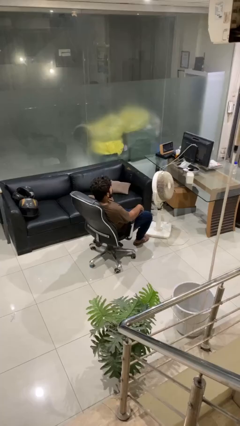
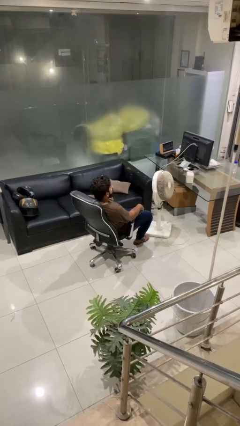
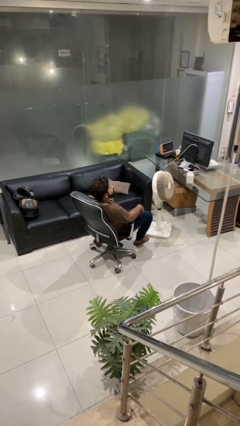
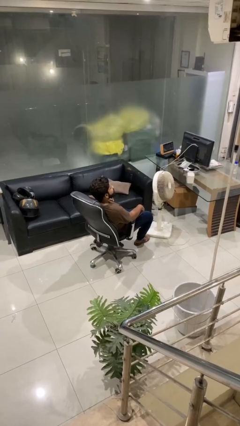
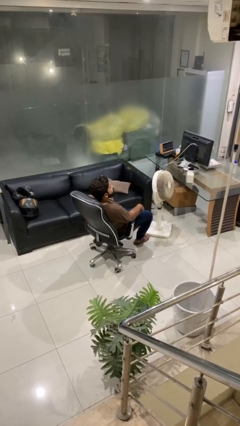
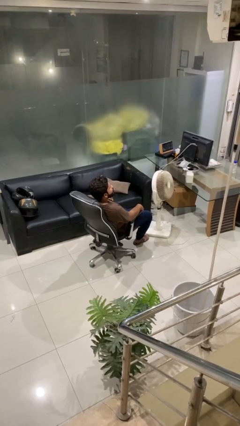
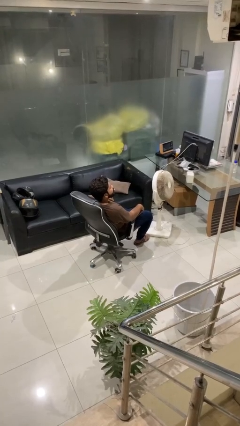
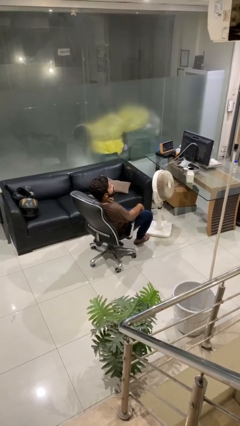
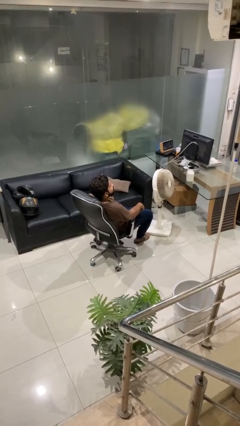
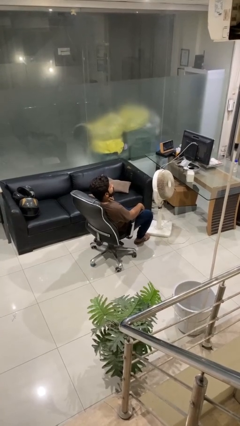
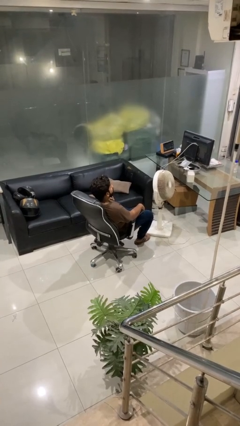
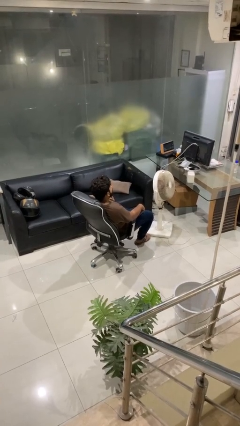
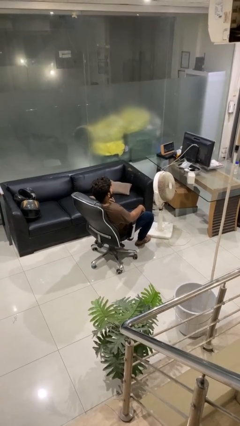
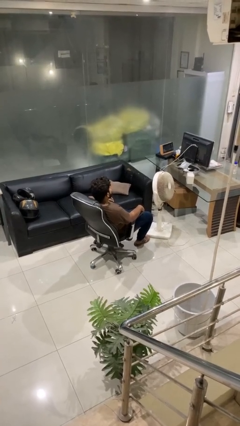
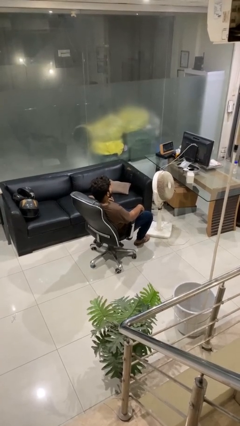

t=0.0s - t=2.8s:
person sticks out tongue

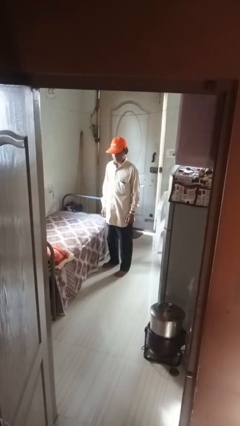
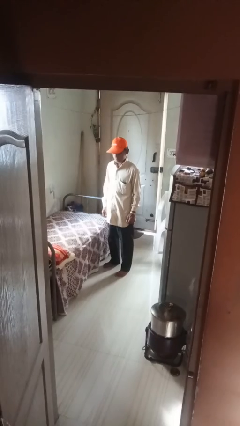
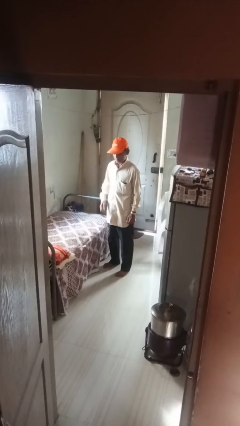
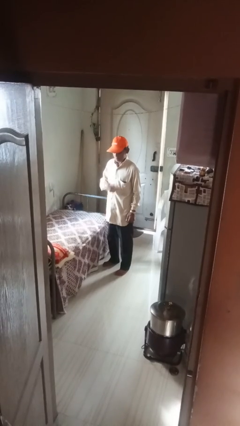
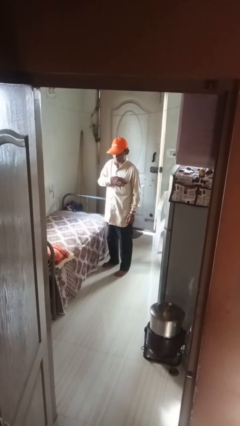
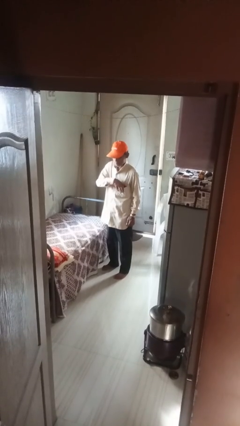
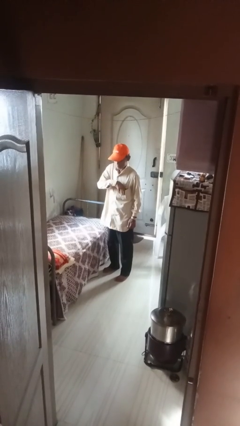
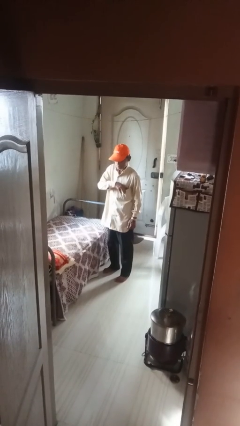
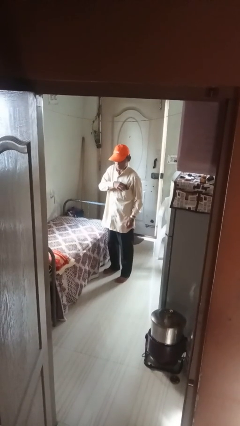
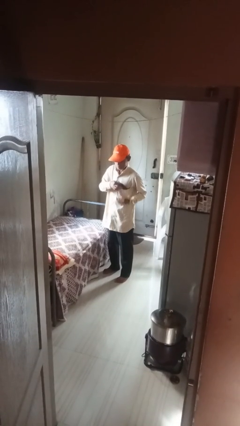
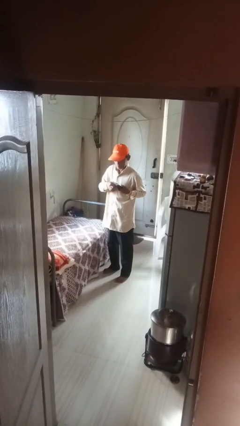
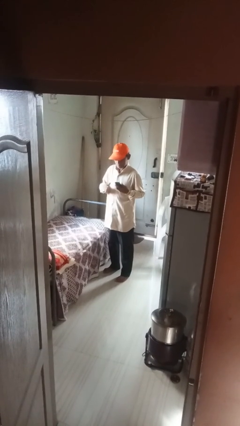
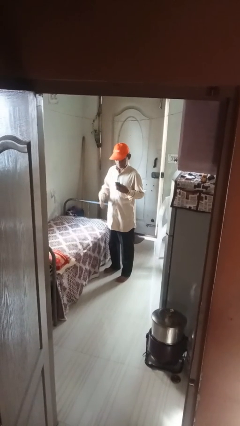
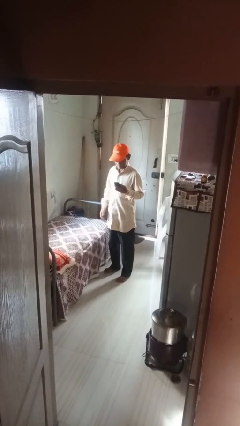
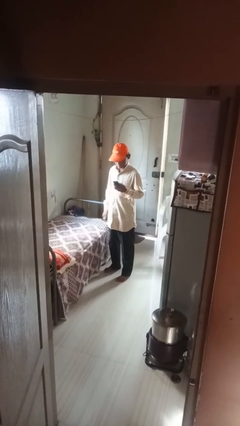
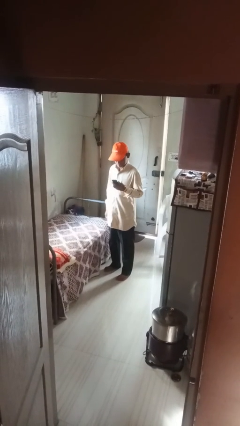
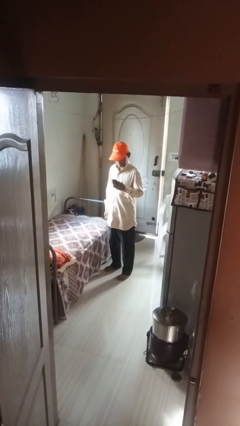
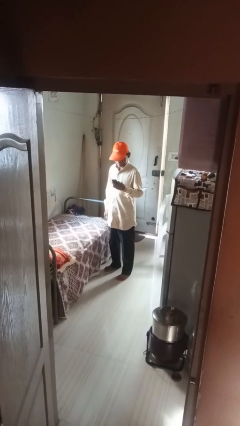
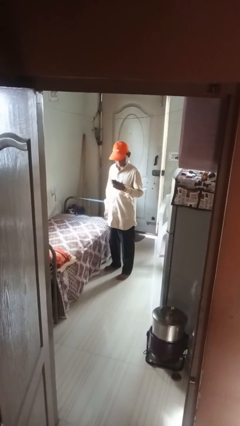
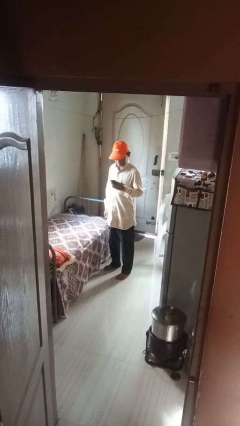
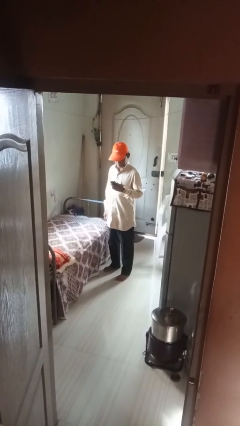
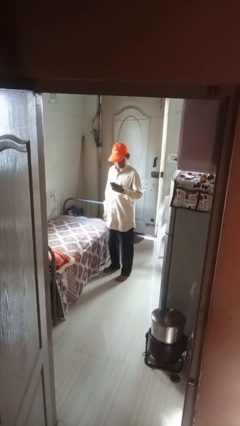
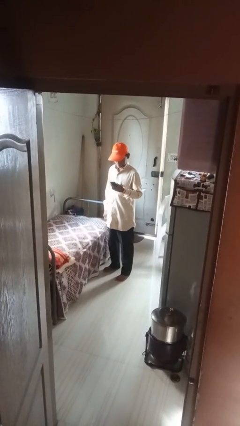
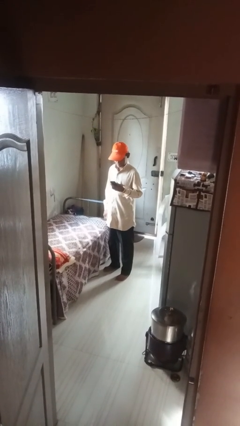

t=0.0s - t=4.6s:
person takes phone from pocket

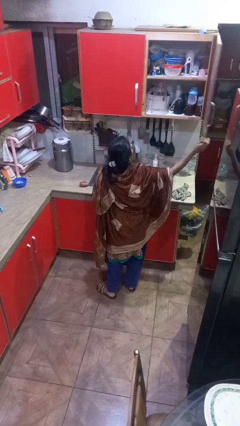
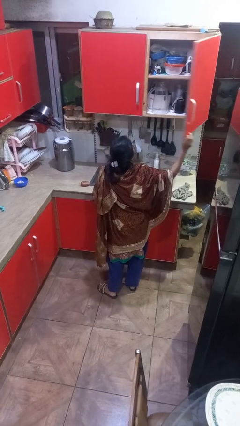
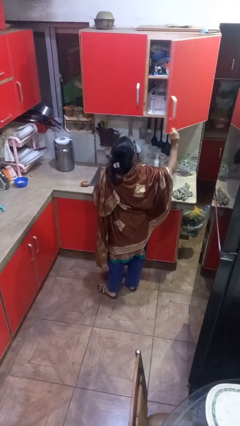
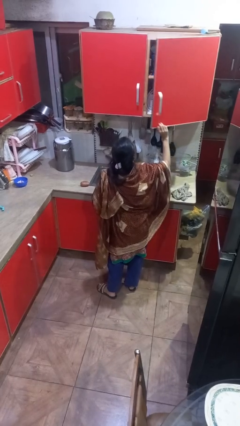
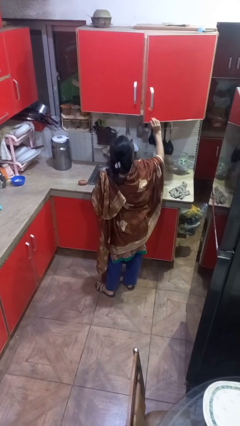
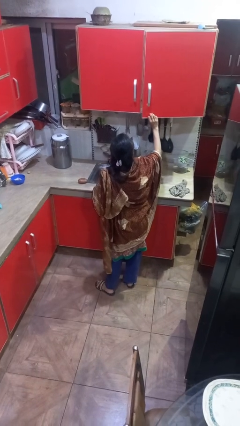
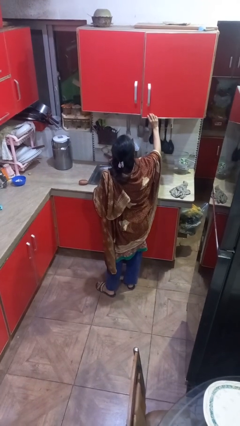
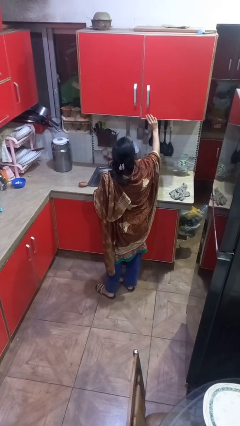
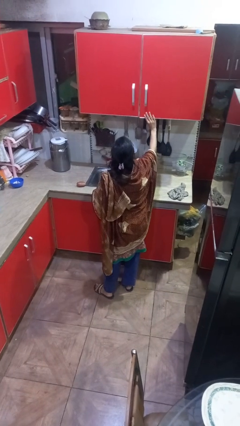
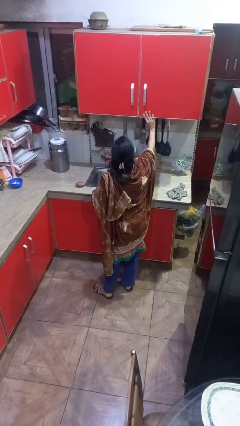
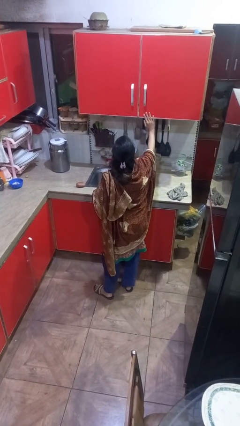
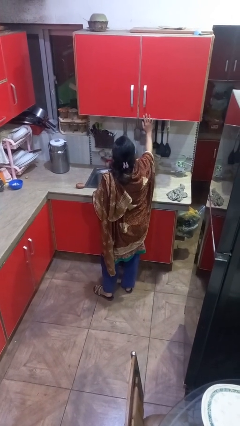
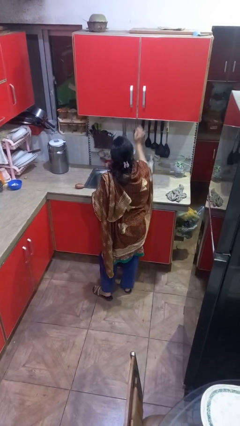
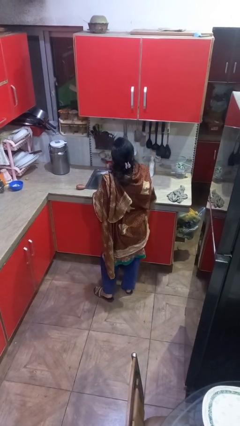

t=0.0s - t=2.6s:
person closes cabinet

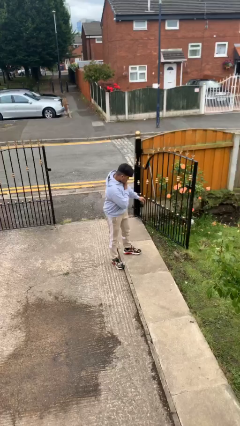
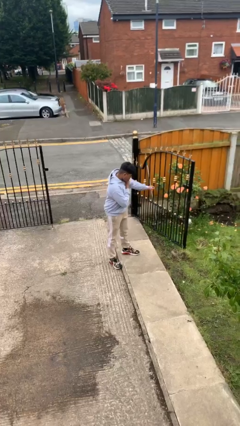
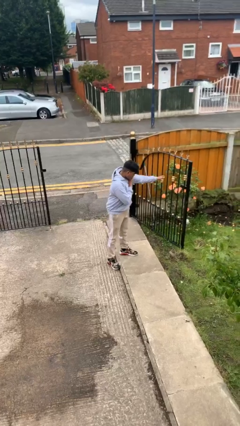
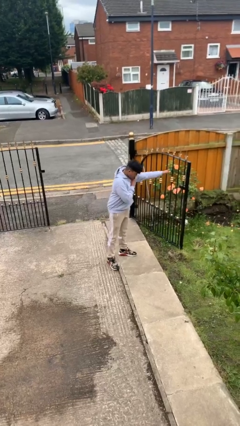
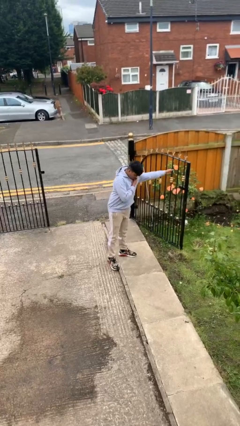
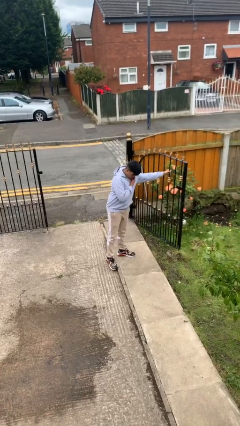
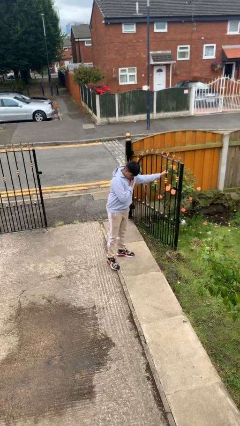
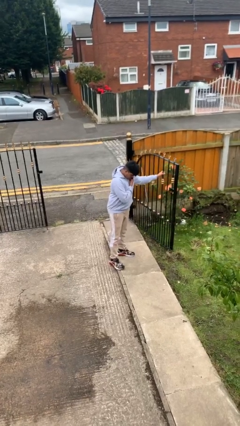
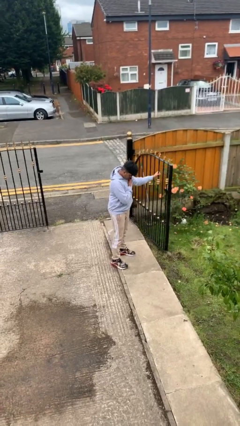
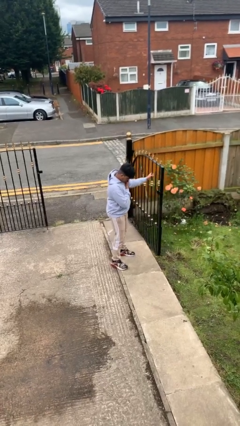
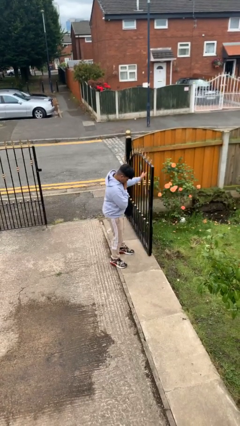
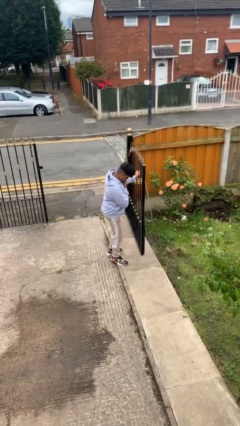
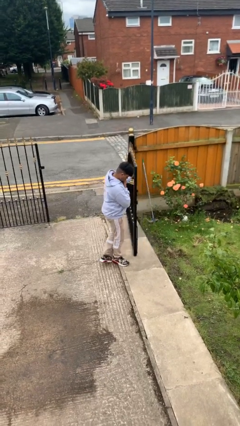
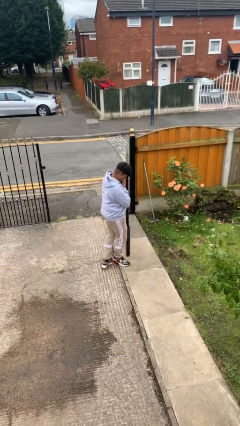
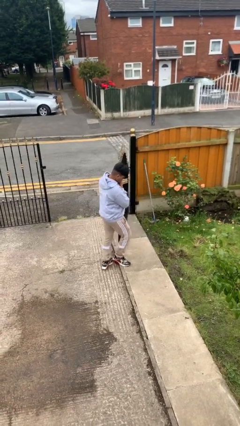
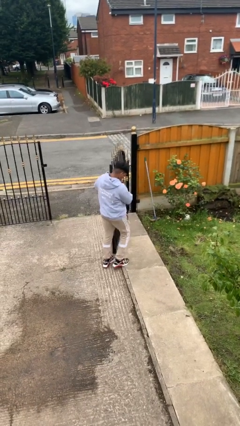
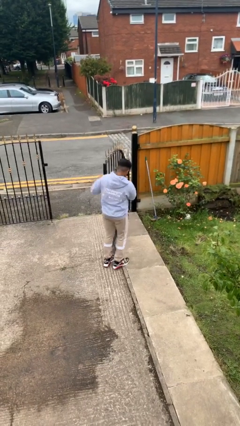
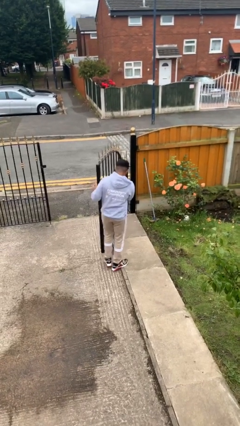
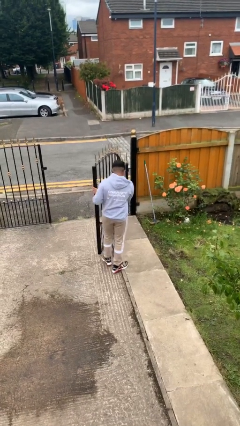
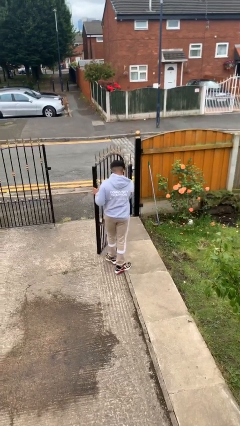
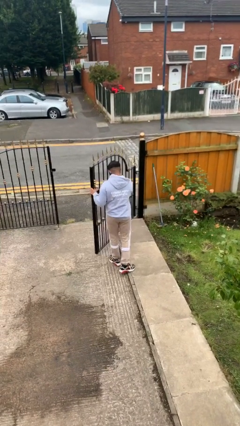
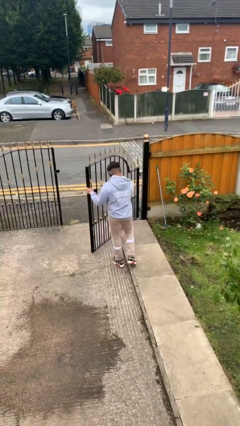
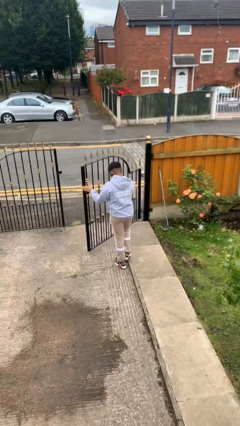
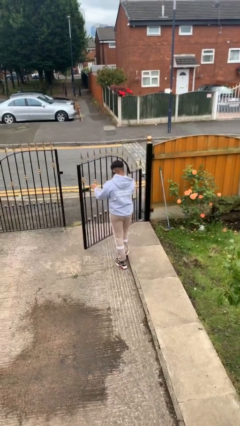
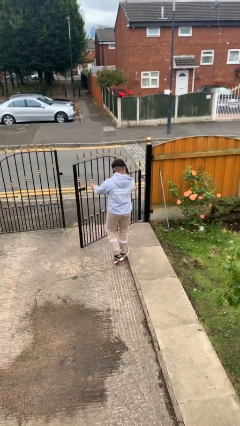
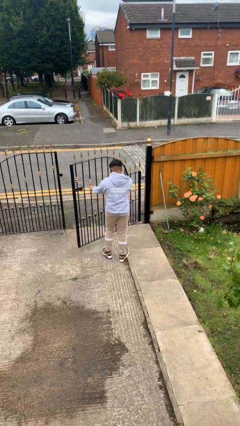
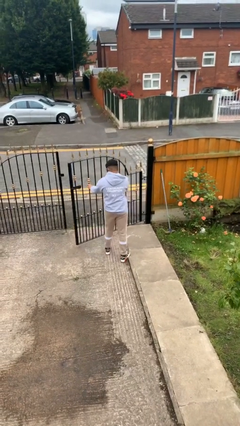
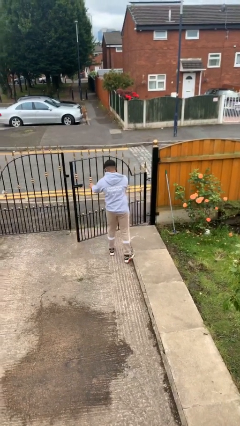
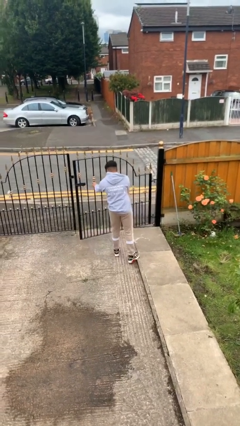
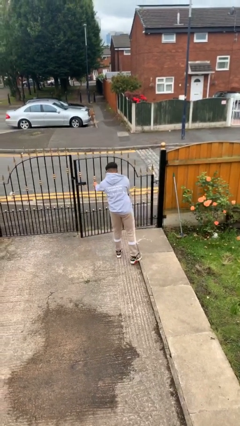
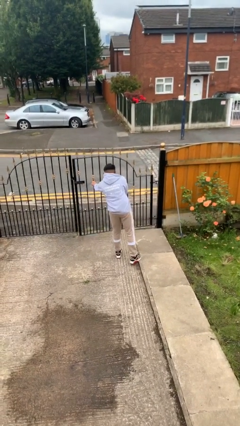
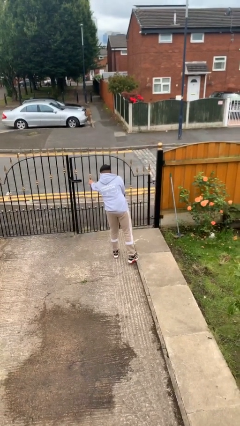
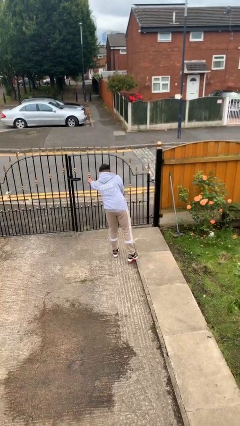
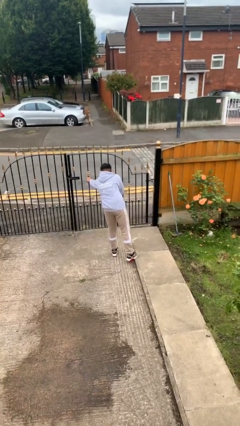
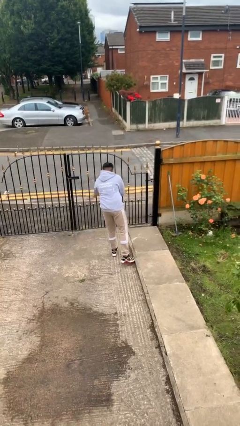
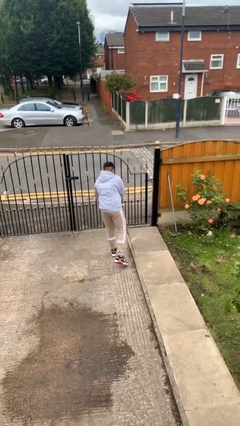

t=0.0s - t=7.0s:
person closes facility door
